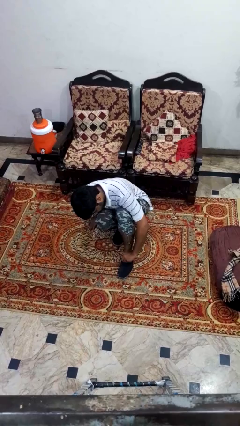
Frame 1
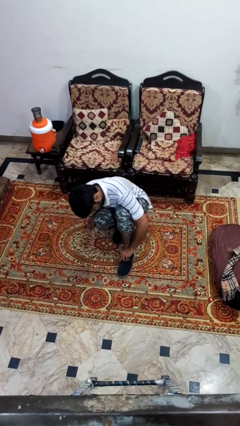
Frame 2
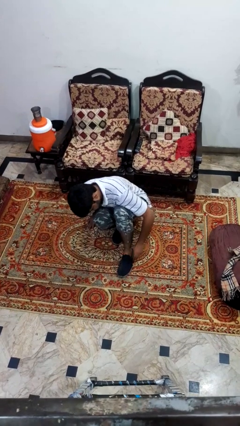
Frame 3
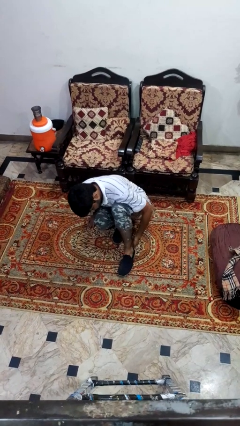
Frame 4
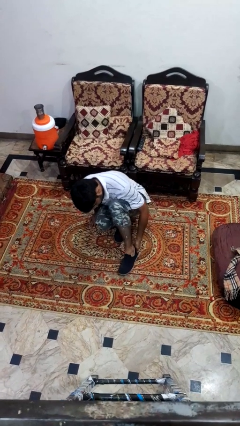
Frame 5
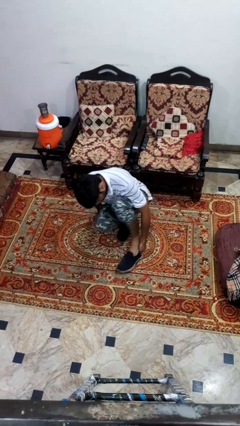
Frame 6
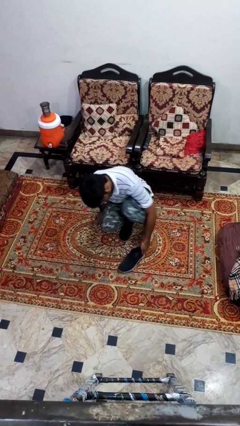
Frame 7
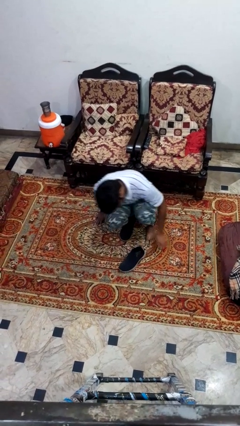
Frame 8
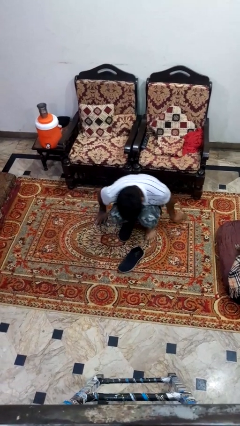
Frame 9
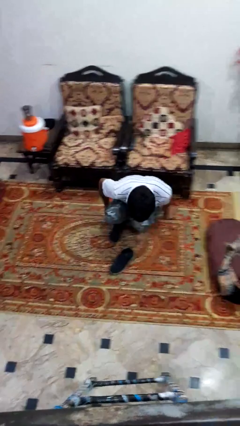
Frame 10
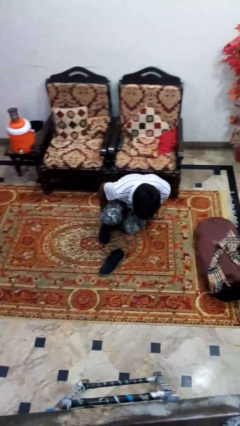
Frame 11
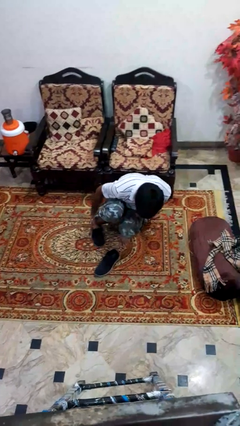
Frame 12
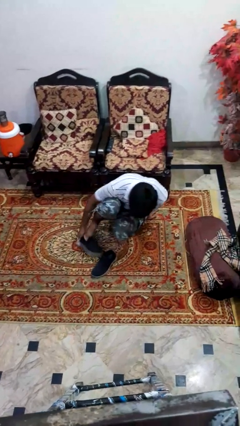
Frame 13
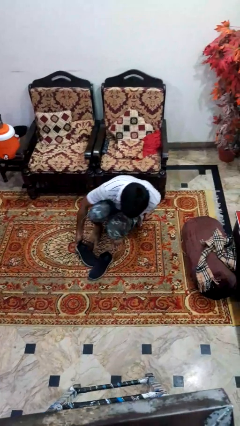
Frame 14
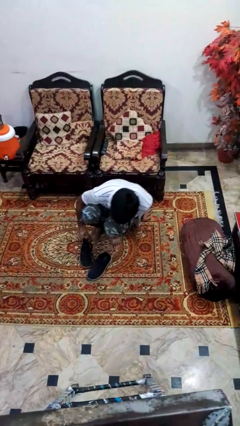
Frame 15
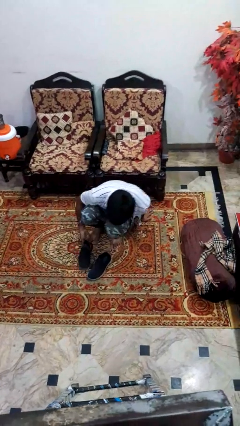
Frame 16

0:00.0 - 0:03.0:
person takes off shoes

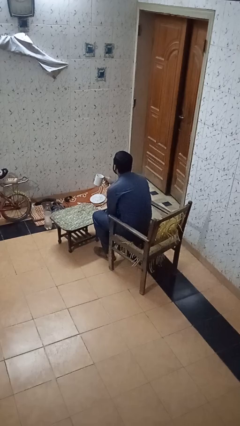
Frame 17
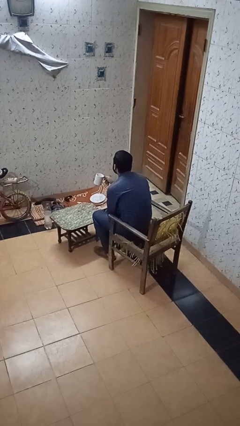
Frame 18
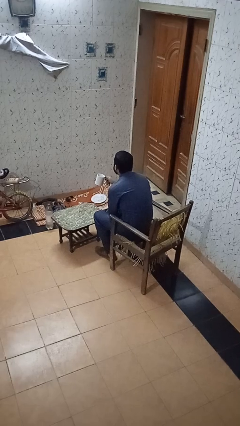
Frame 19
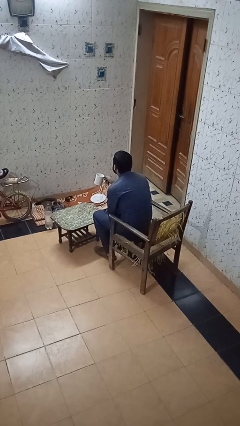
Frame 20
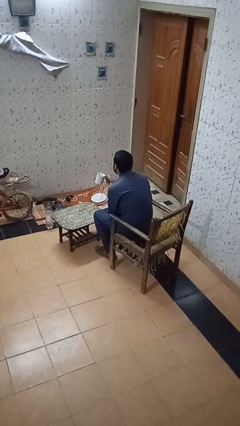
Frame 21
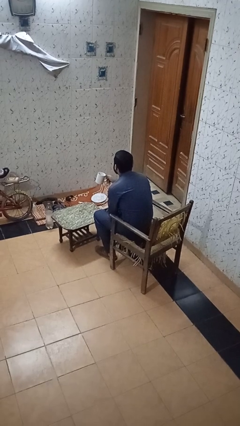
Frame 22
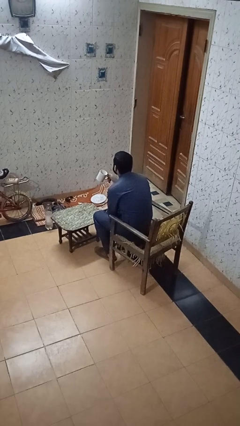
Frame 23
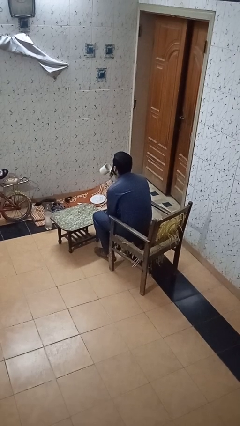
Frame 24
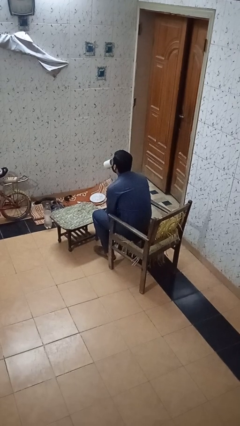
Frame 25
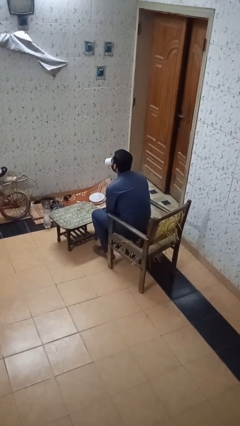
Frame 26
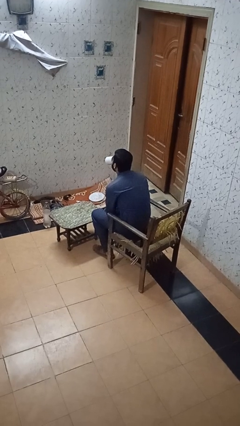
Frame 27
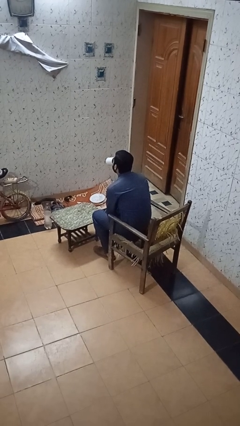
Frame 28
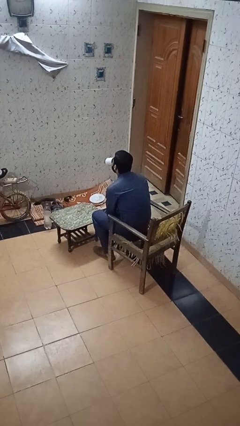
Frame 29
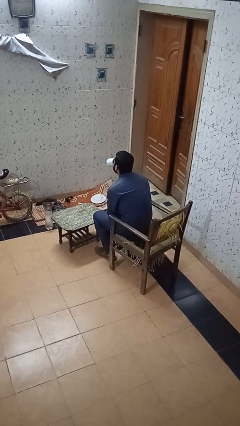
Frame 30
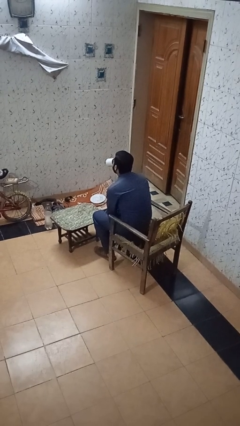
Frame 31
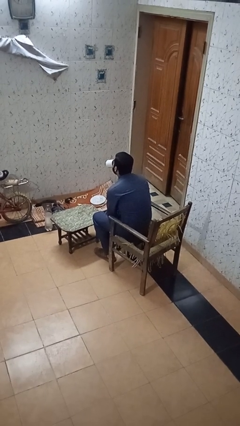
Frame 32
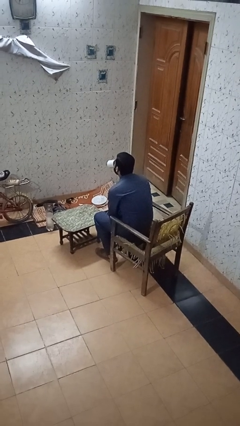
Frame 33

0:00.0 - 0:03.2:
person drinks from mug

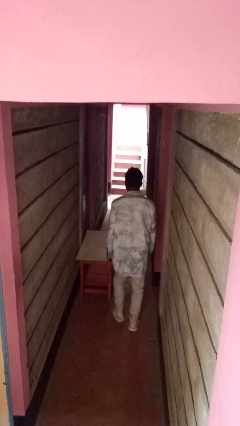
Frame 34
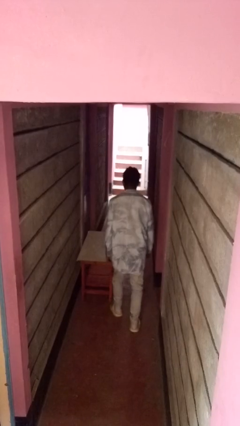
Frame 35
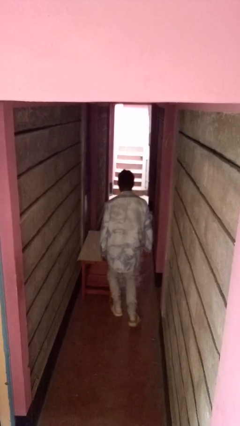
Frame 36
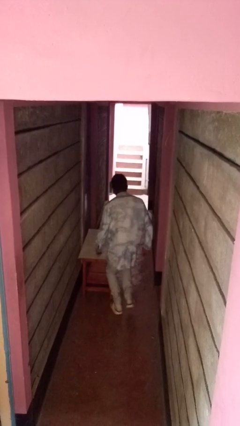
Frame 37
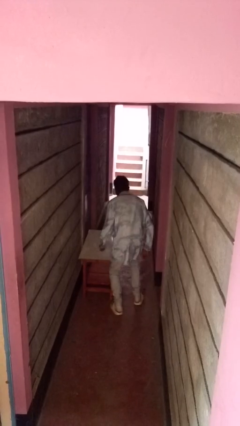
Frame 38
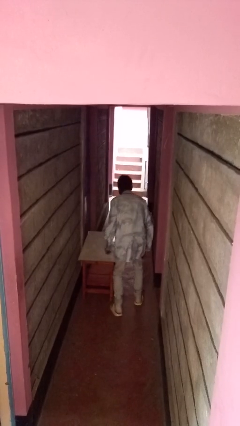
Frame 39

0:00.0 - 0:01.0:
person bumps into table

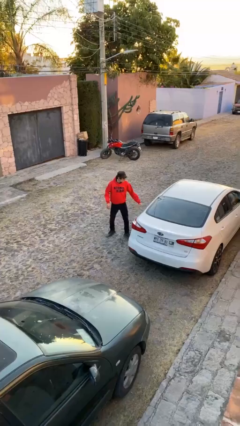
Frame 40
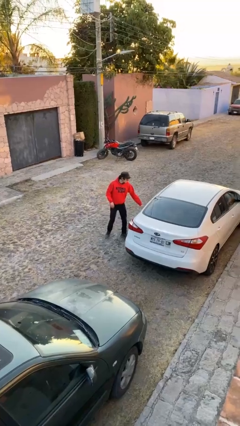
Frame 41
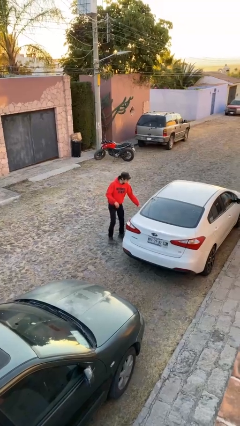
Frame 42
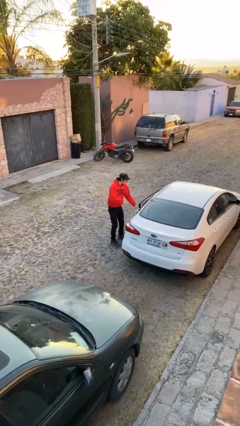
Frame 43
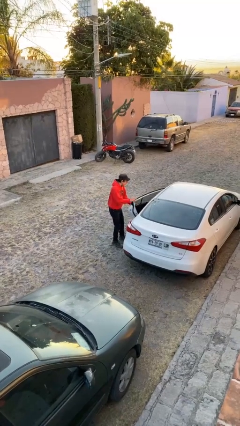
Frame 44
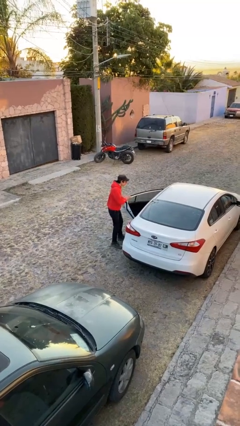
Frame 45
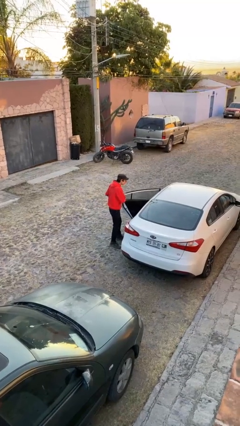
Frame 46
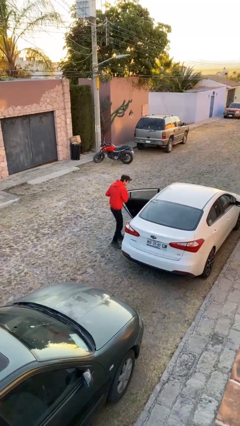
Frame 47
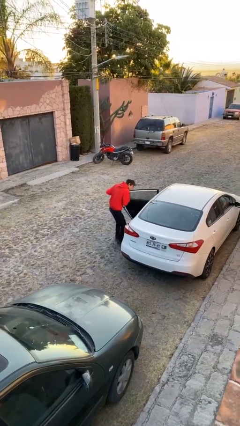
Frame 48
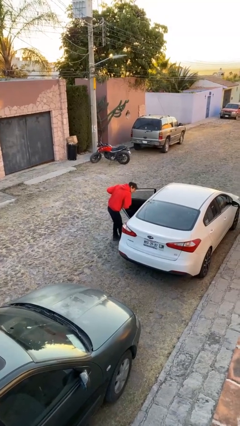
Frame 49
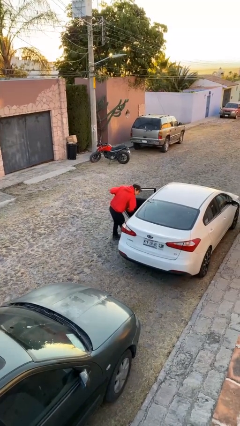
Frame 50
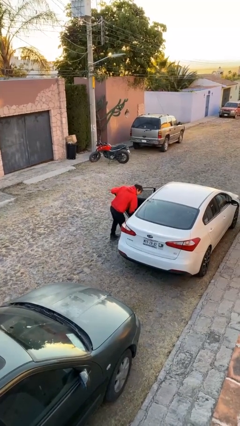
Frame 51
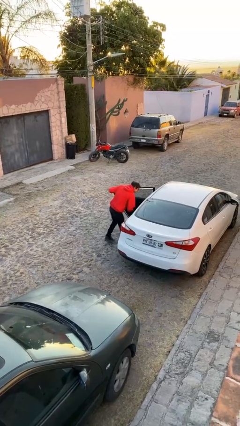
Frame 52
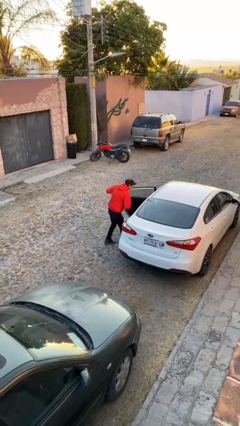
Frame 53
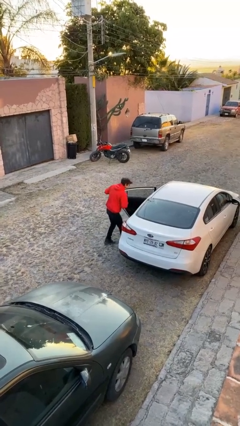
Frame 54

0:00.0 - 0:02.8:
person opens facility door

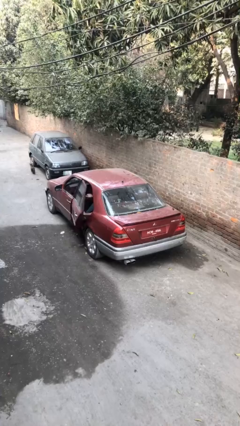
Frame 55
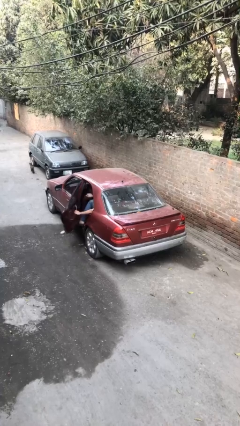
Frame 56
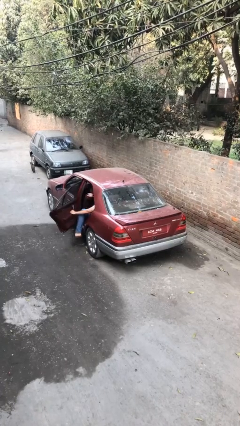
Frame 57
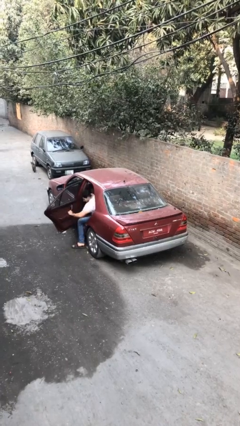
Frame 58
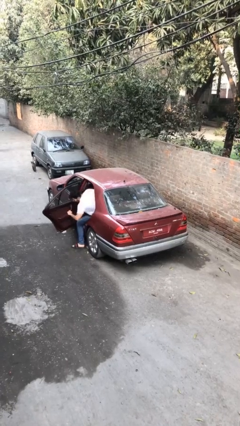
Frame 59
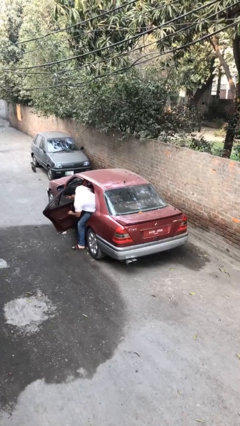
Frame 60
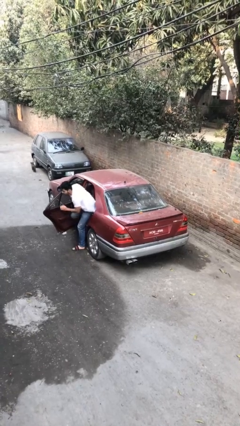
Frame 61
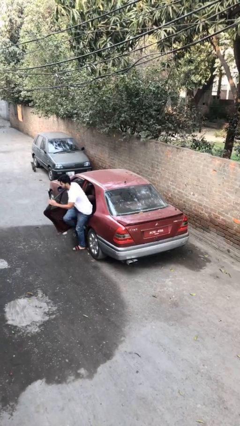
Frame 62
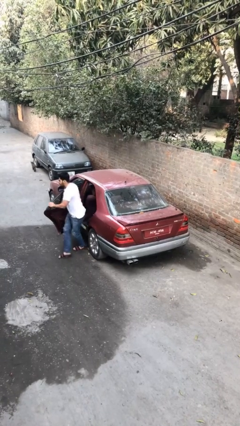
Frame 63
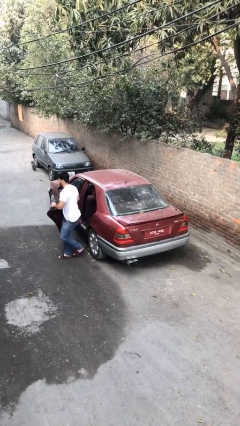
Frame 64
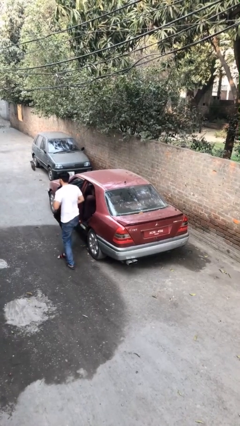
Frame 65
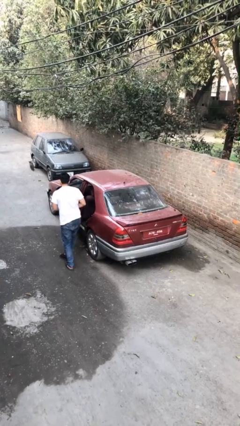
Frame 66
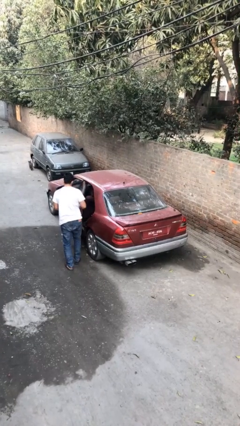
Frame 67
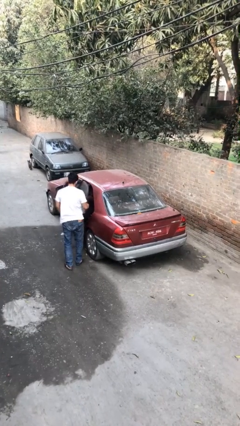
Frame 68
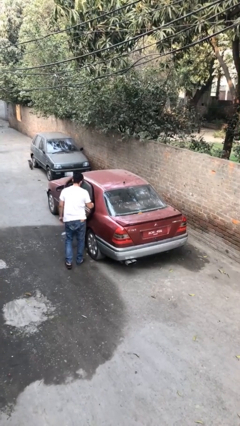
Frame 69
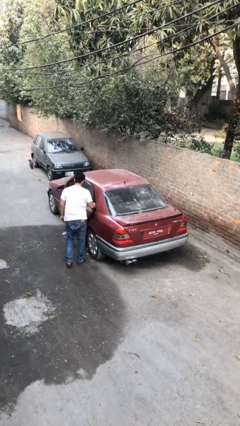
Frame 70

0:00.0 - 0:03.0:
car drops off person

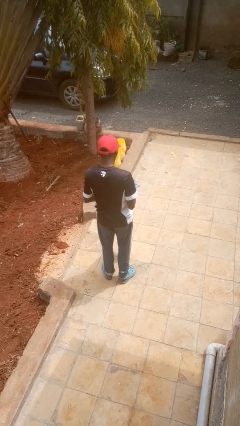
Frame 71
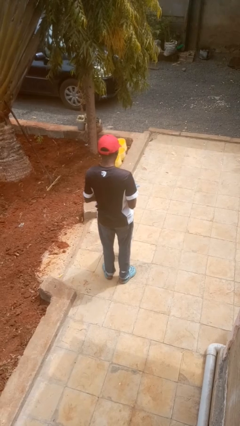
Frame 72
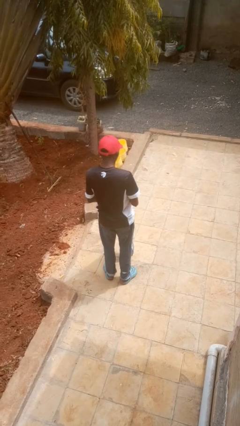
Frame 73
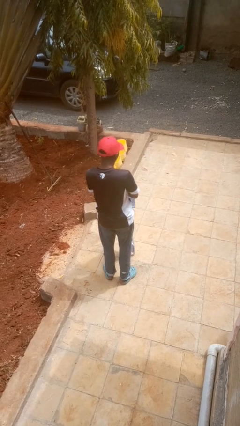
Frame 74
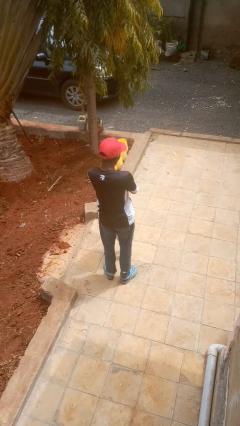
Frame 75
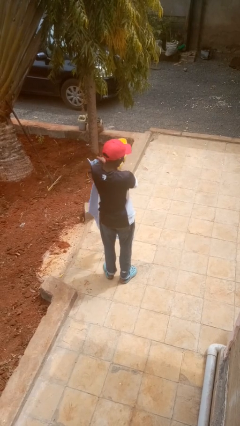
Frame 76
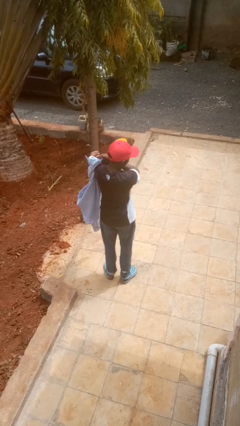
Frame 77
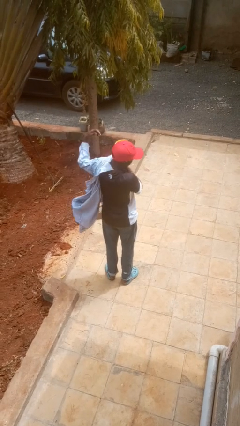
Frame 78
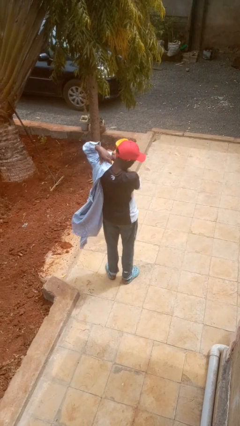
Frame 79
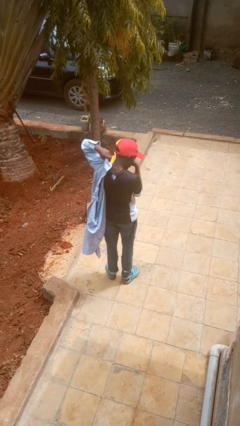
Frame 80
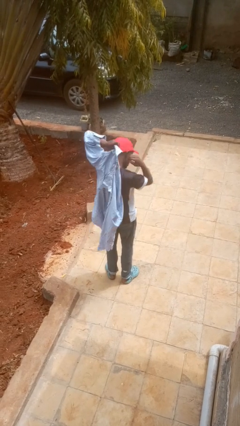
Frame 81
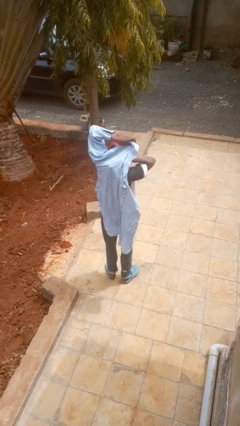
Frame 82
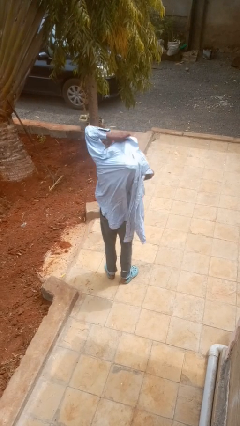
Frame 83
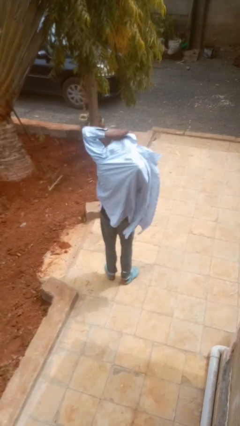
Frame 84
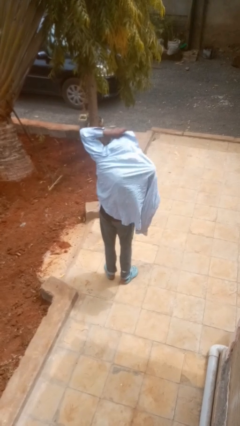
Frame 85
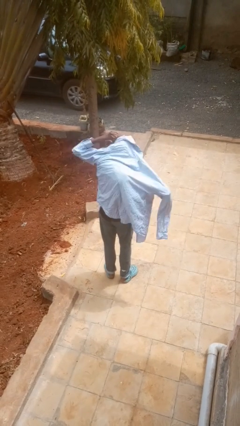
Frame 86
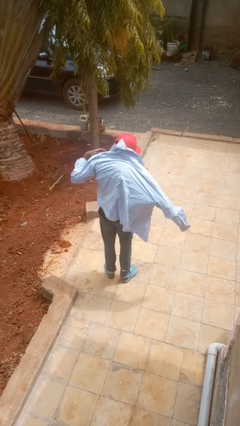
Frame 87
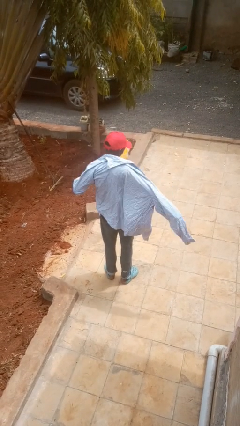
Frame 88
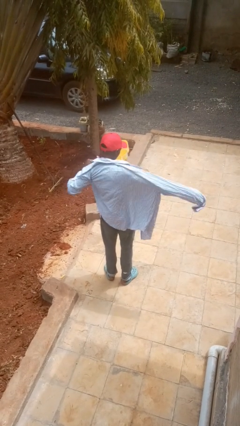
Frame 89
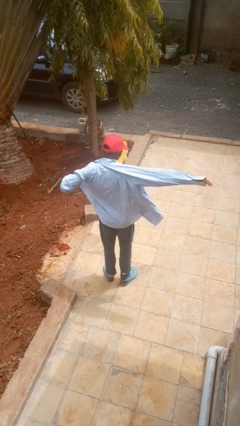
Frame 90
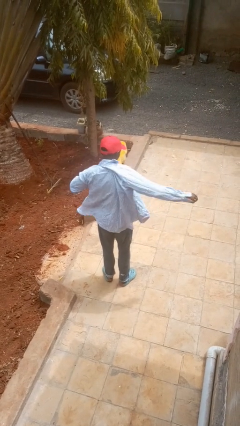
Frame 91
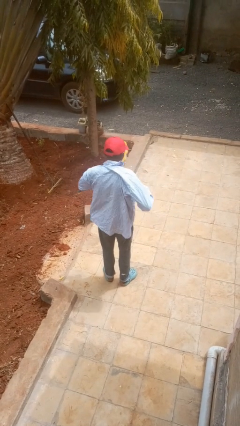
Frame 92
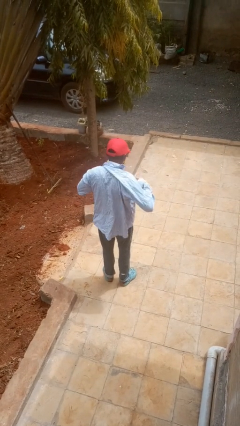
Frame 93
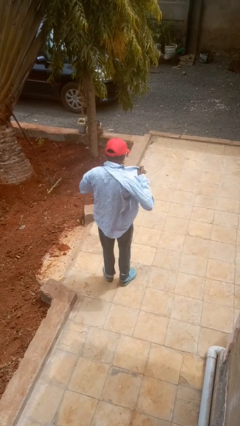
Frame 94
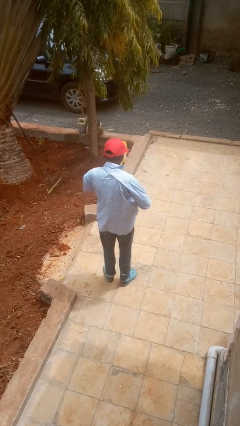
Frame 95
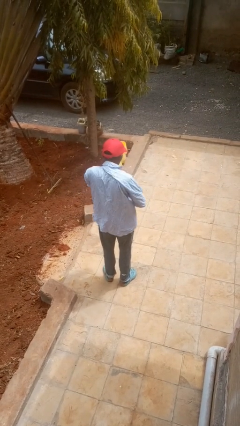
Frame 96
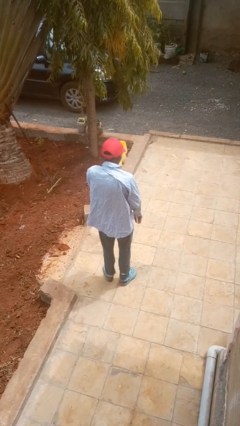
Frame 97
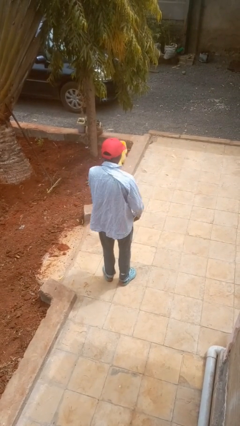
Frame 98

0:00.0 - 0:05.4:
person puts on shirt
